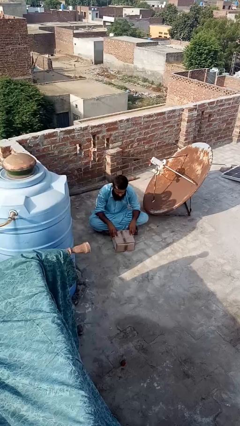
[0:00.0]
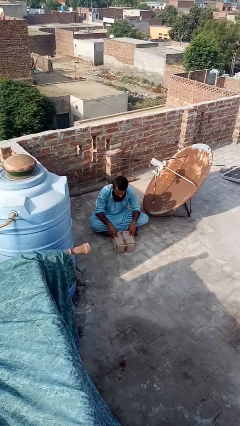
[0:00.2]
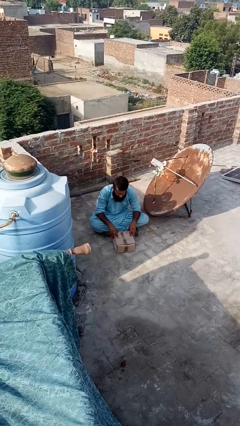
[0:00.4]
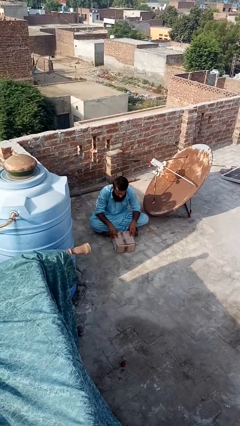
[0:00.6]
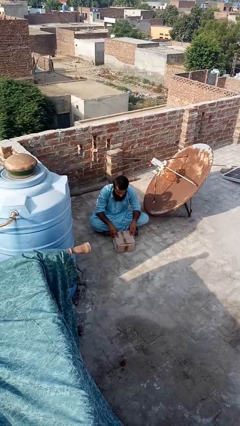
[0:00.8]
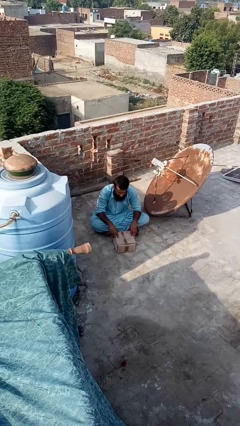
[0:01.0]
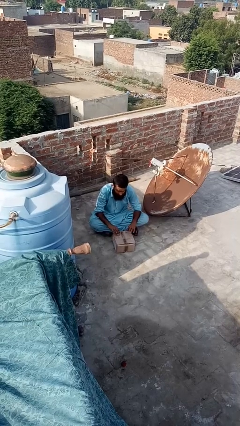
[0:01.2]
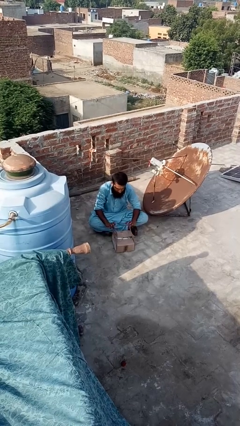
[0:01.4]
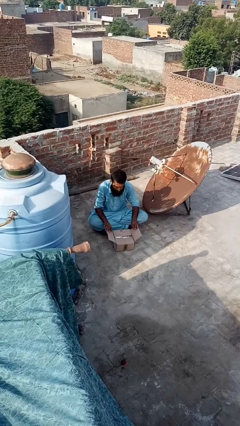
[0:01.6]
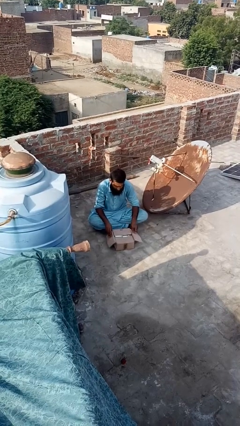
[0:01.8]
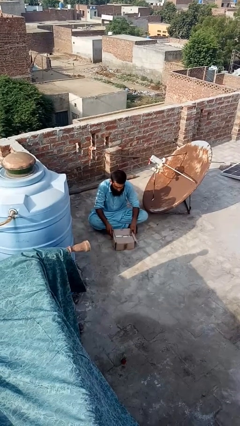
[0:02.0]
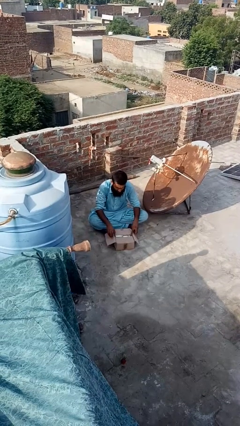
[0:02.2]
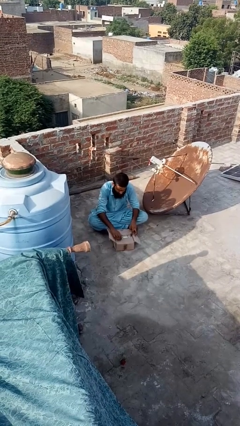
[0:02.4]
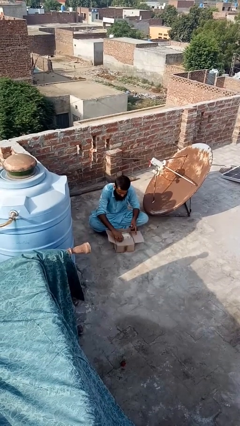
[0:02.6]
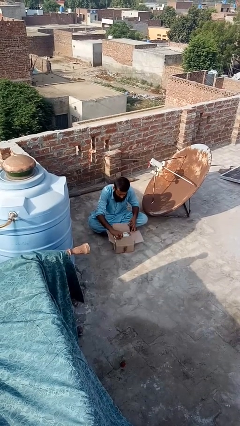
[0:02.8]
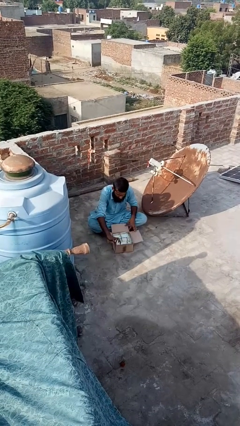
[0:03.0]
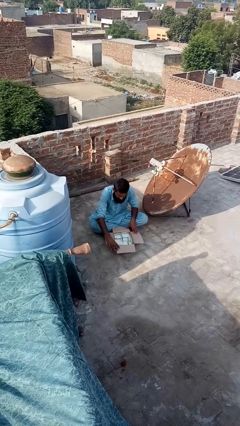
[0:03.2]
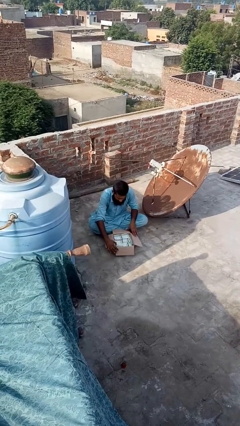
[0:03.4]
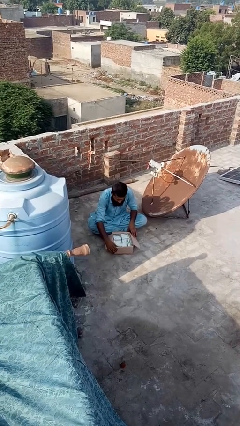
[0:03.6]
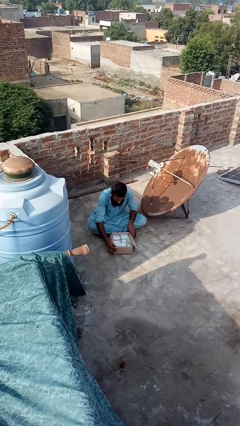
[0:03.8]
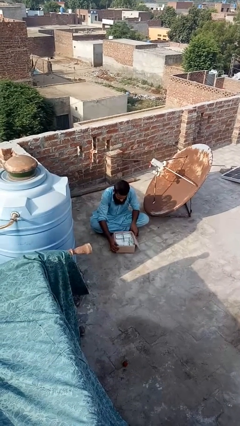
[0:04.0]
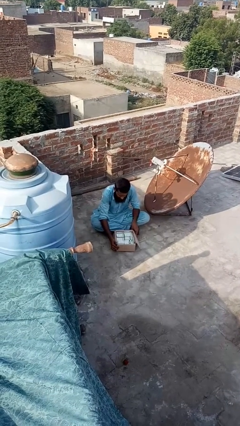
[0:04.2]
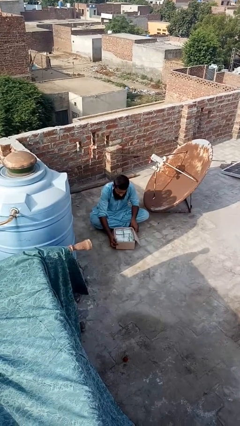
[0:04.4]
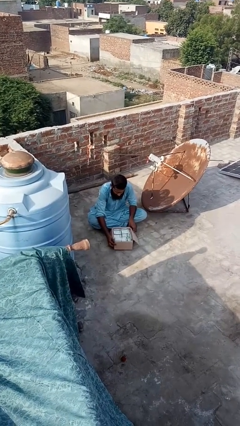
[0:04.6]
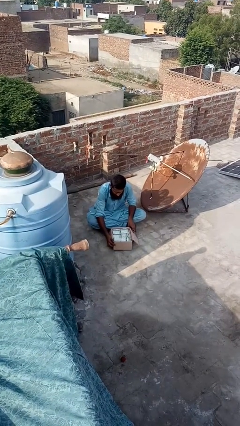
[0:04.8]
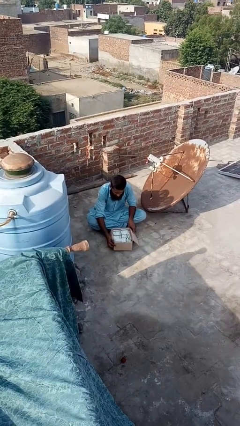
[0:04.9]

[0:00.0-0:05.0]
person opens box

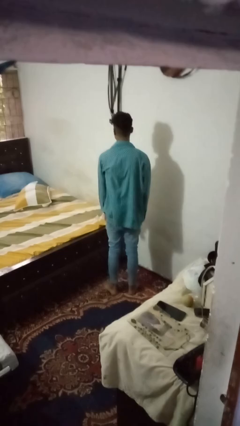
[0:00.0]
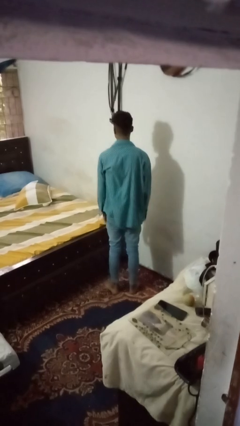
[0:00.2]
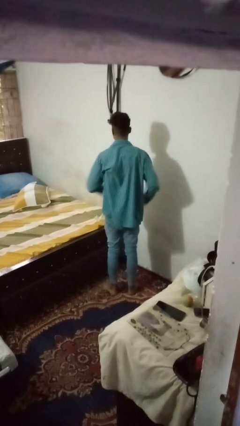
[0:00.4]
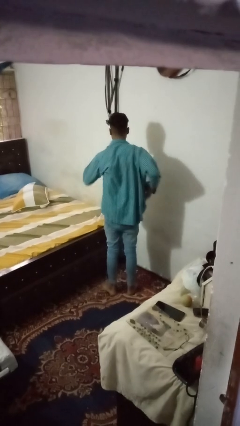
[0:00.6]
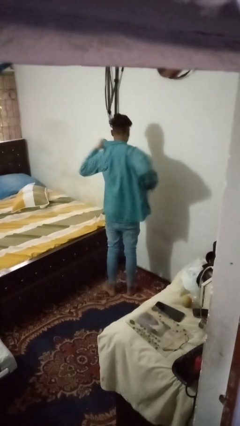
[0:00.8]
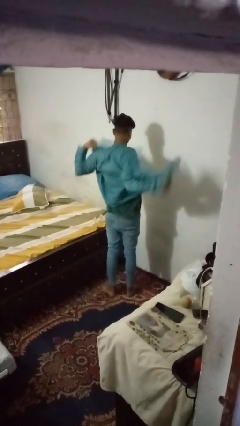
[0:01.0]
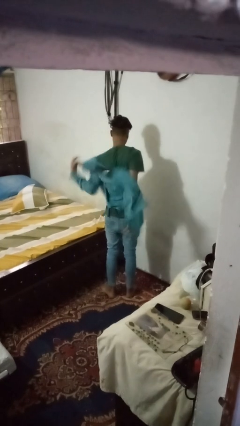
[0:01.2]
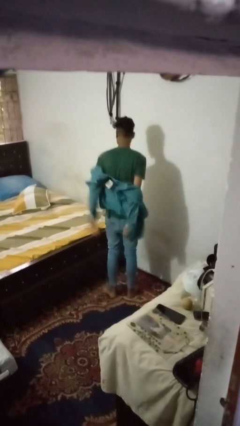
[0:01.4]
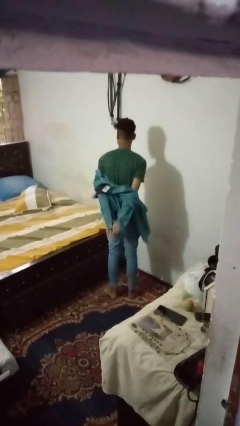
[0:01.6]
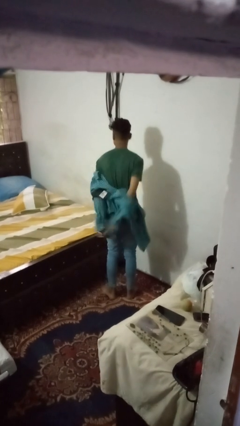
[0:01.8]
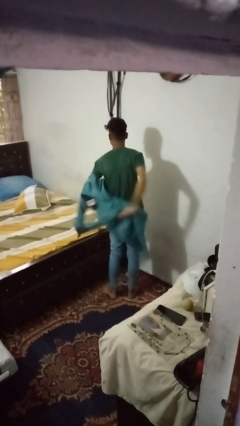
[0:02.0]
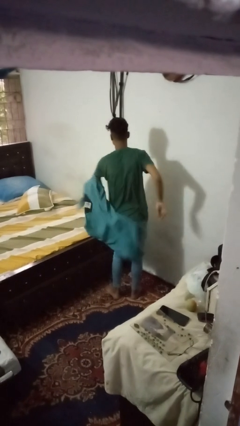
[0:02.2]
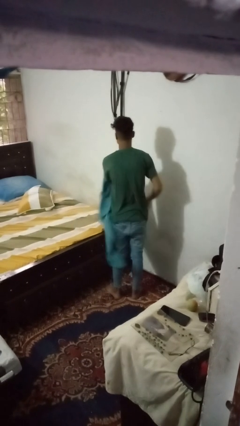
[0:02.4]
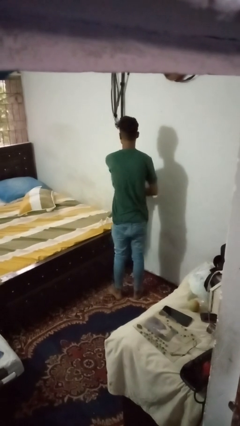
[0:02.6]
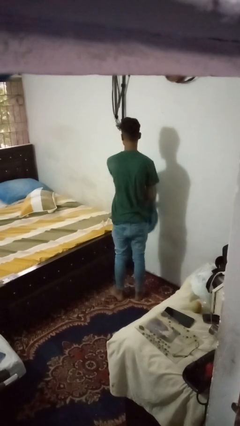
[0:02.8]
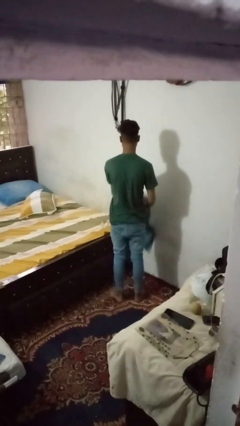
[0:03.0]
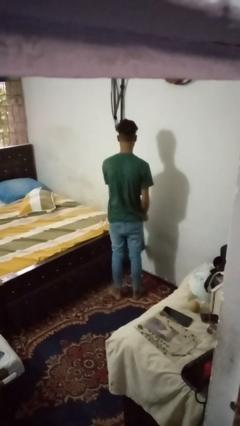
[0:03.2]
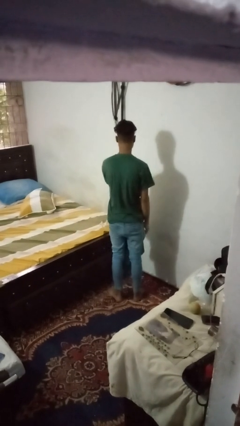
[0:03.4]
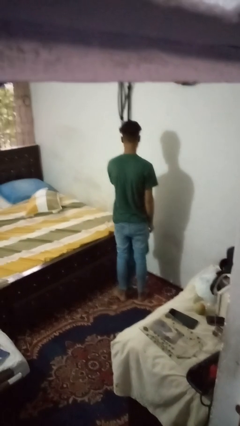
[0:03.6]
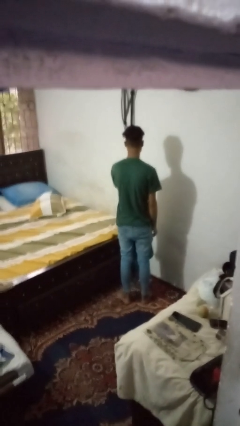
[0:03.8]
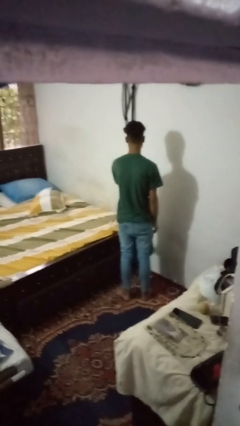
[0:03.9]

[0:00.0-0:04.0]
person takes off shirt

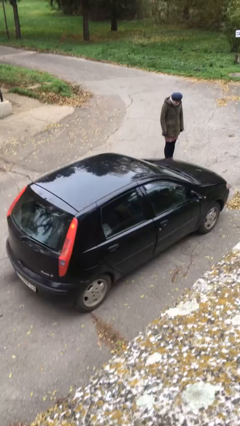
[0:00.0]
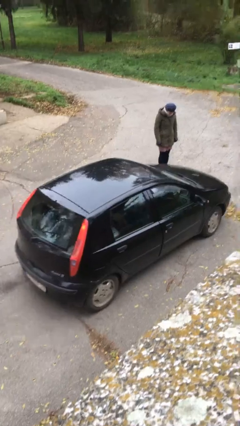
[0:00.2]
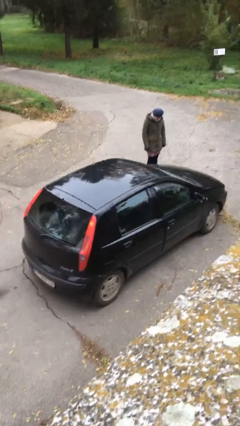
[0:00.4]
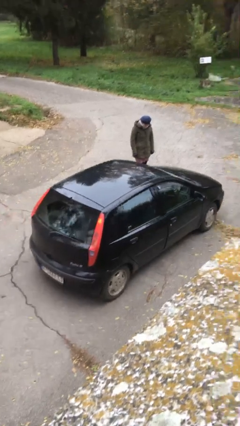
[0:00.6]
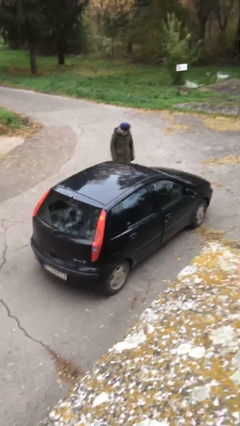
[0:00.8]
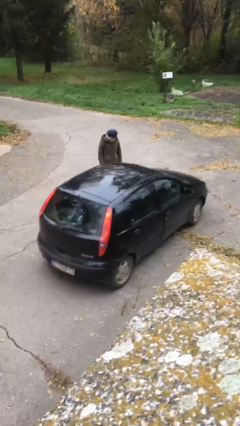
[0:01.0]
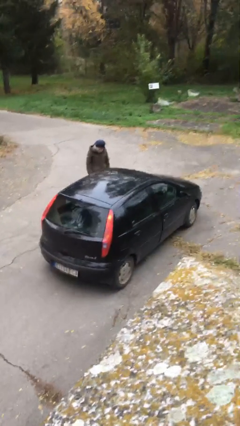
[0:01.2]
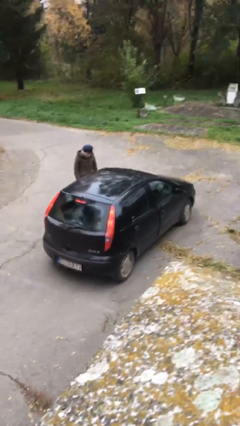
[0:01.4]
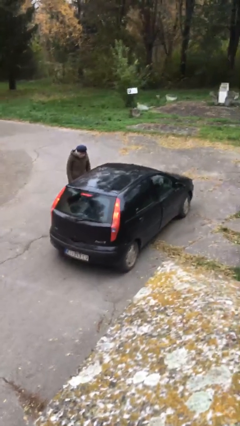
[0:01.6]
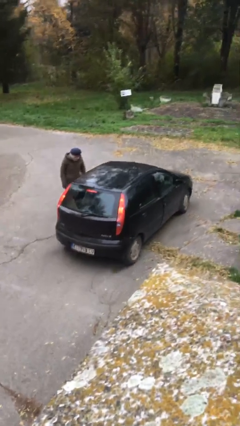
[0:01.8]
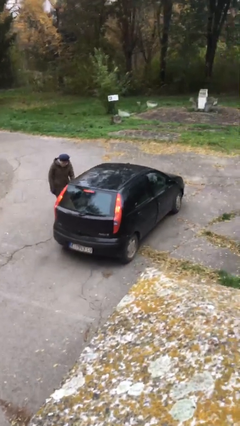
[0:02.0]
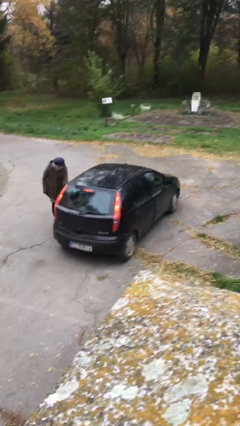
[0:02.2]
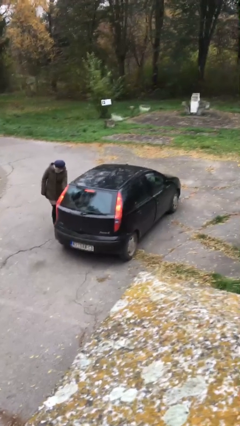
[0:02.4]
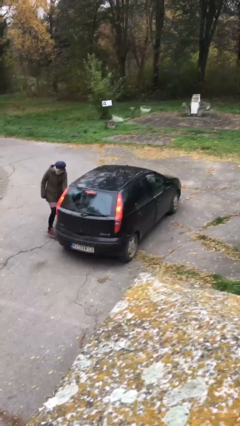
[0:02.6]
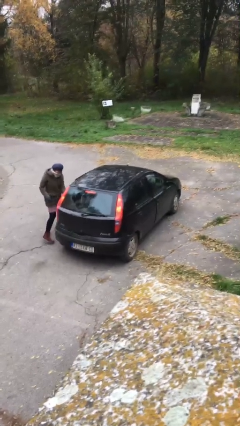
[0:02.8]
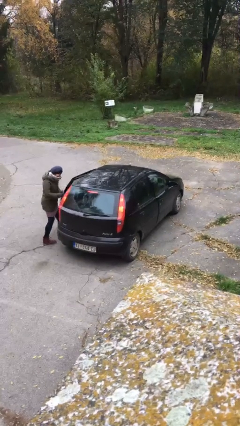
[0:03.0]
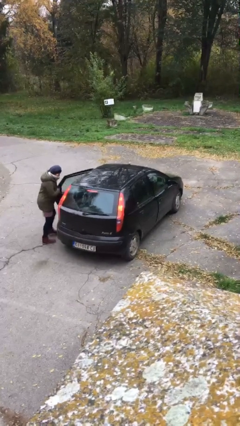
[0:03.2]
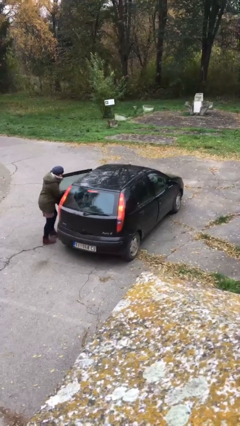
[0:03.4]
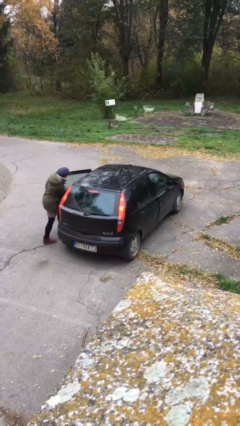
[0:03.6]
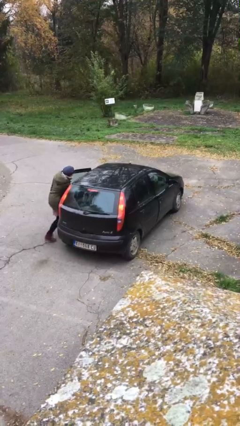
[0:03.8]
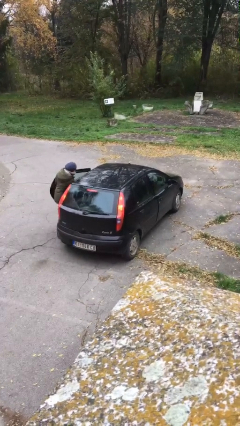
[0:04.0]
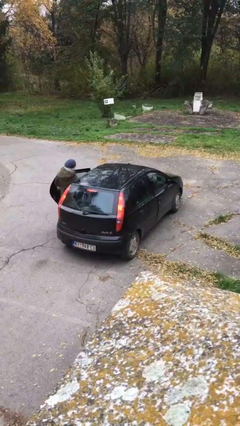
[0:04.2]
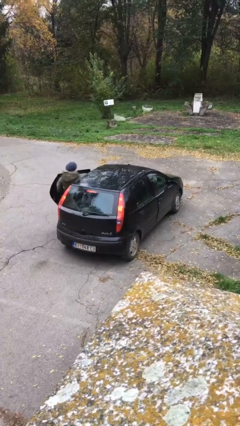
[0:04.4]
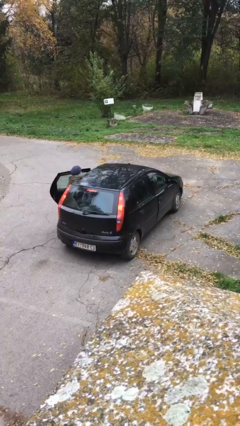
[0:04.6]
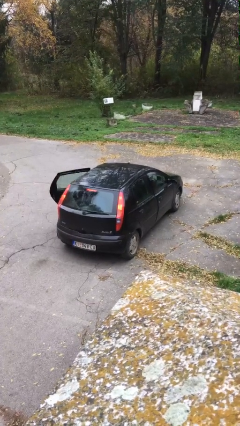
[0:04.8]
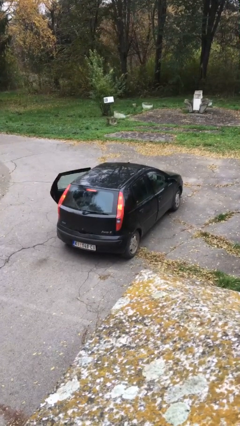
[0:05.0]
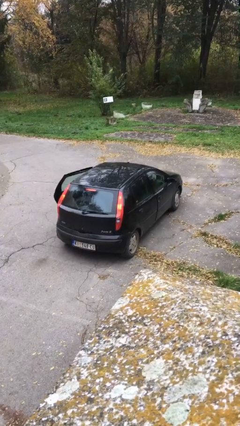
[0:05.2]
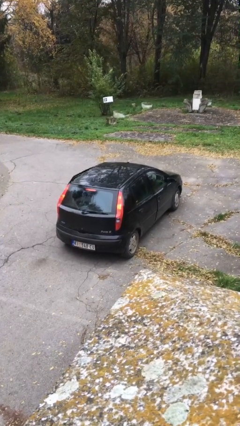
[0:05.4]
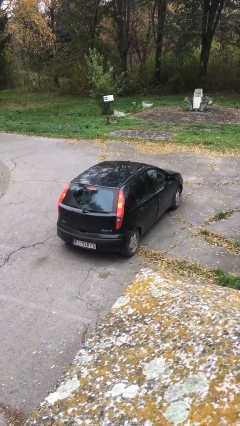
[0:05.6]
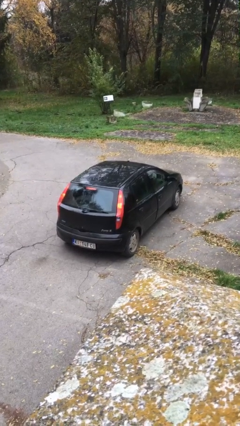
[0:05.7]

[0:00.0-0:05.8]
car picks up person

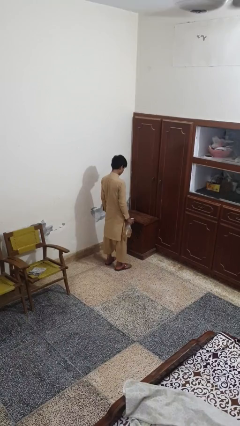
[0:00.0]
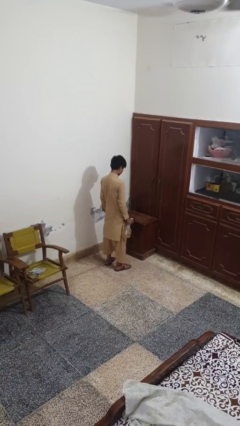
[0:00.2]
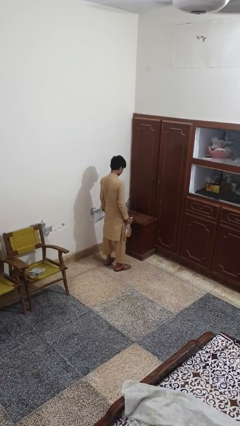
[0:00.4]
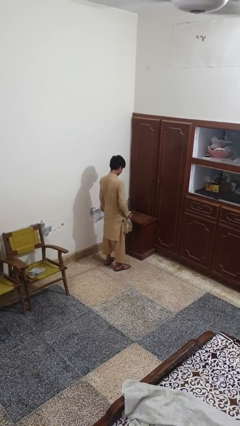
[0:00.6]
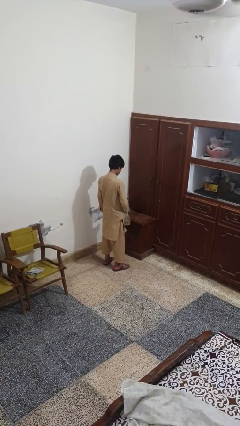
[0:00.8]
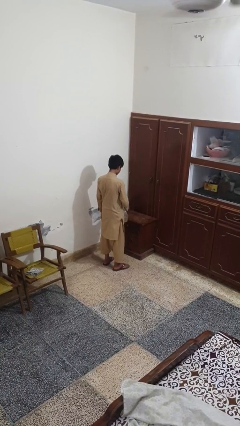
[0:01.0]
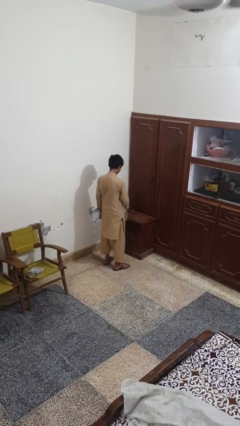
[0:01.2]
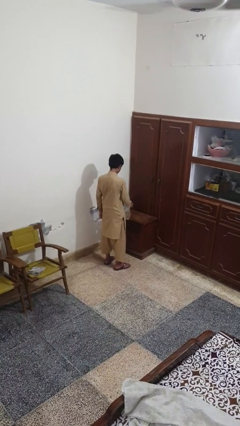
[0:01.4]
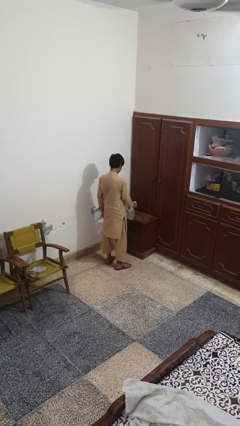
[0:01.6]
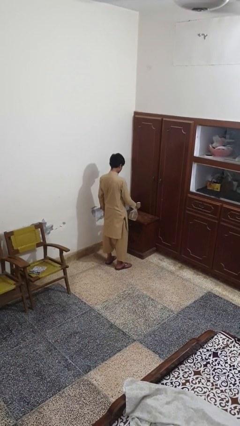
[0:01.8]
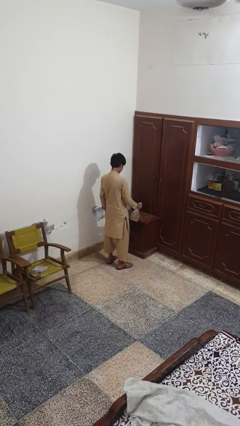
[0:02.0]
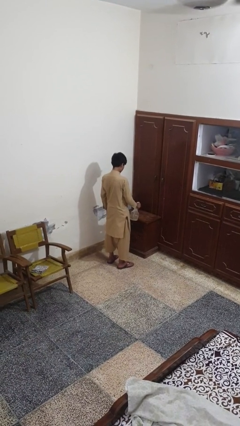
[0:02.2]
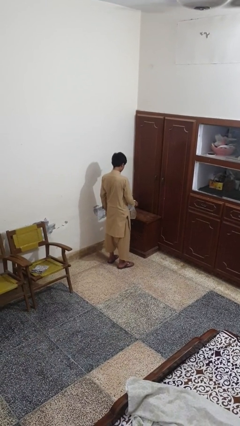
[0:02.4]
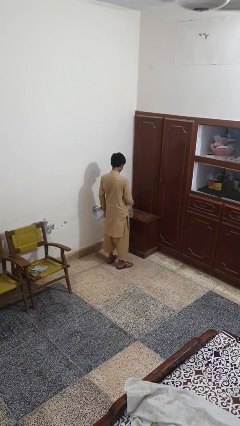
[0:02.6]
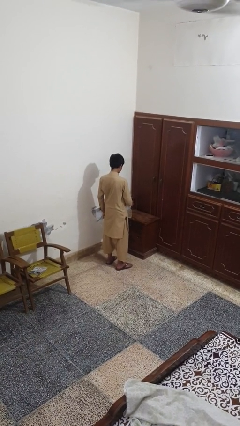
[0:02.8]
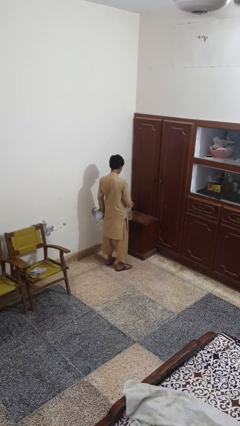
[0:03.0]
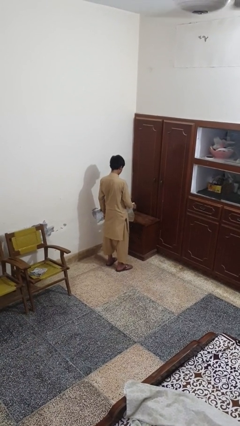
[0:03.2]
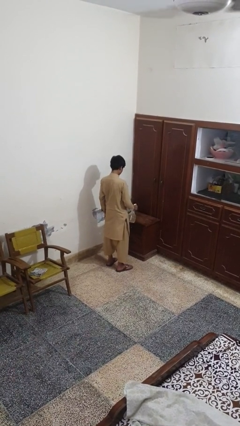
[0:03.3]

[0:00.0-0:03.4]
person sprays from bottle
